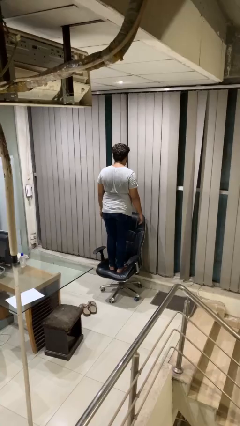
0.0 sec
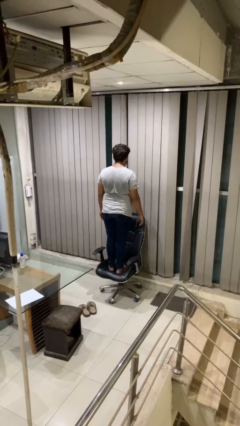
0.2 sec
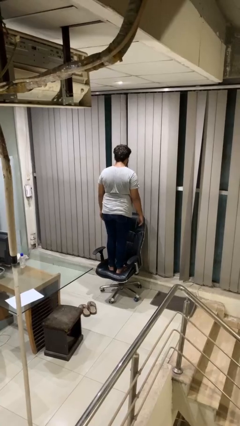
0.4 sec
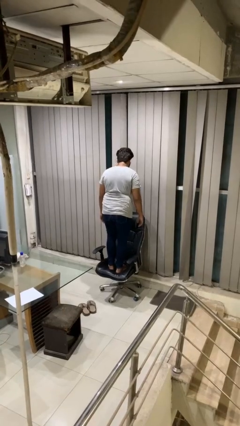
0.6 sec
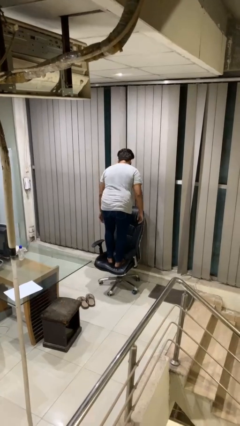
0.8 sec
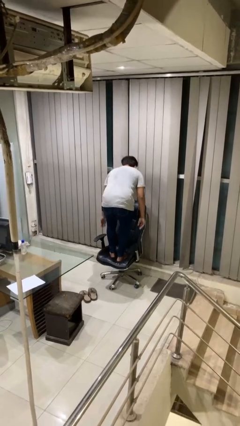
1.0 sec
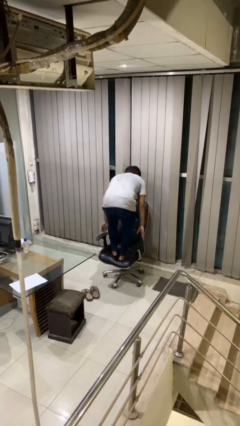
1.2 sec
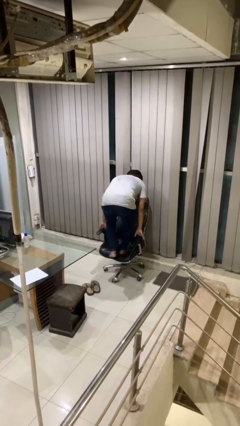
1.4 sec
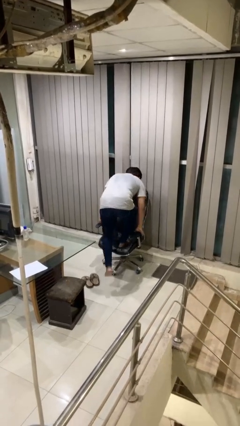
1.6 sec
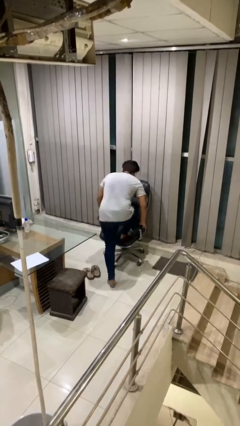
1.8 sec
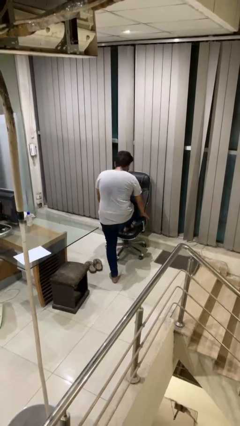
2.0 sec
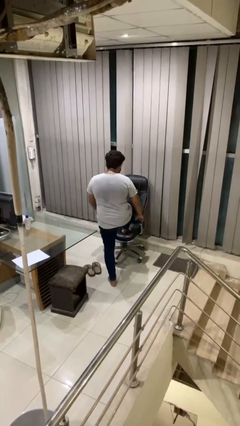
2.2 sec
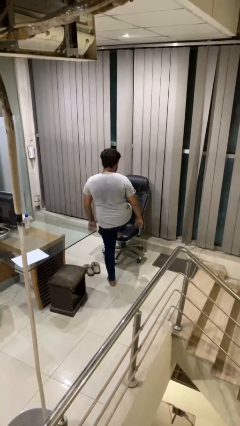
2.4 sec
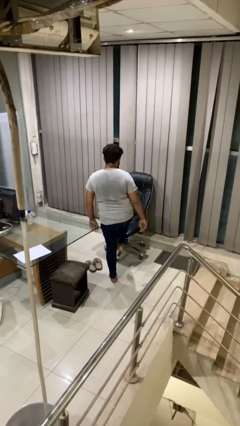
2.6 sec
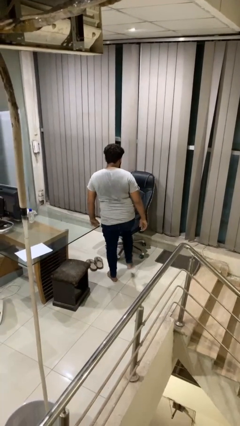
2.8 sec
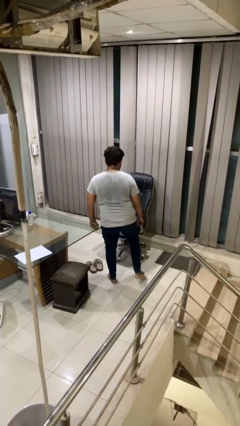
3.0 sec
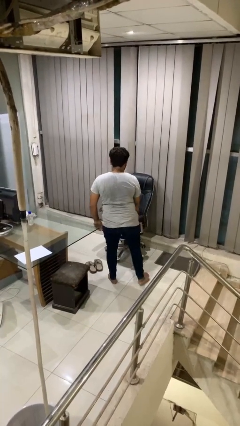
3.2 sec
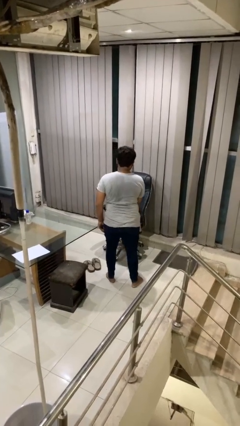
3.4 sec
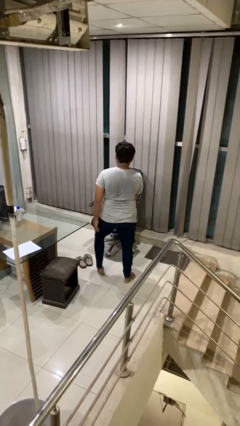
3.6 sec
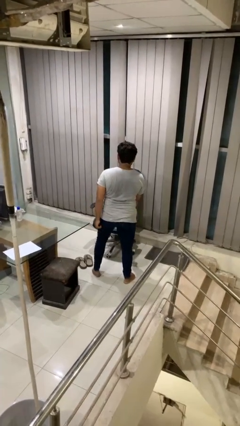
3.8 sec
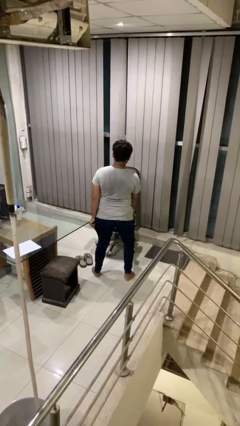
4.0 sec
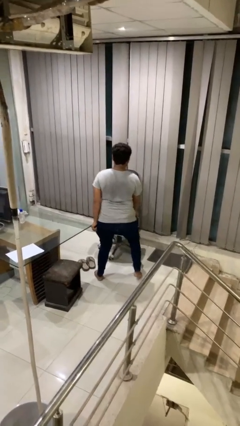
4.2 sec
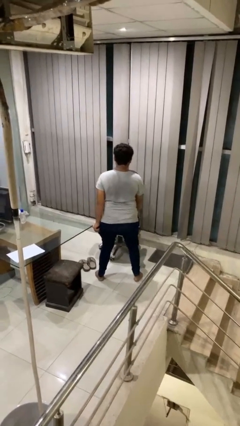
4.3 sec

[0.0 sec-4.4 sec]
person climbs off chair

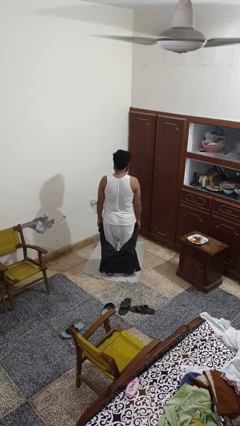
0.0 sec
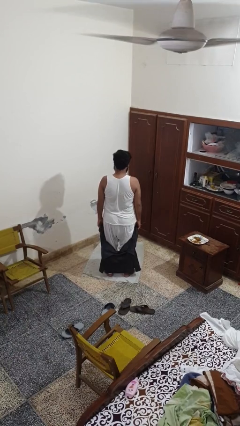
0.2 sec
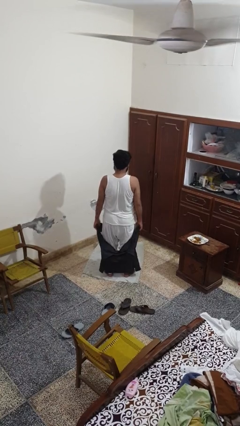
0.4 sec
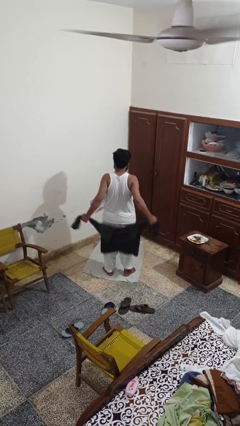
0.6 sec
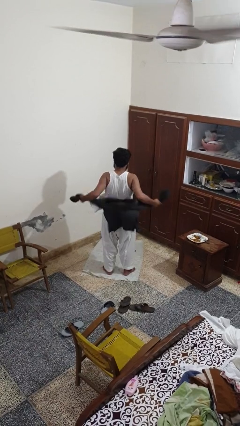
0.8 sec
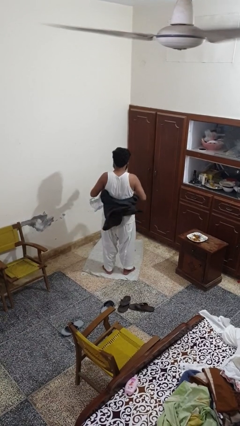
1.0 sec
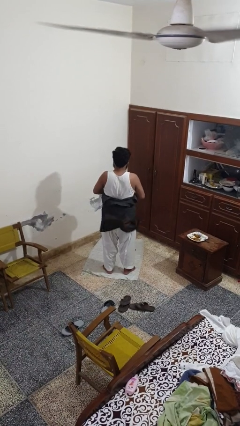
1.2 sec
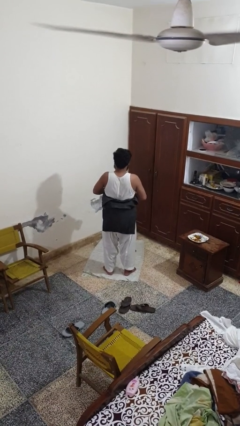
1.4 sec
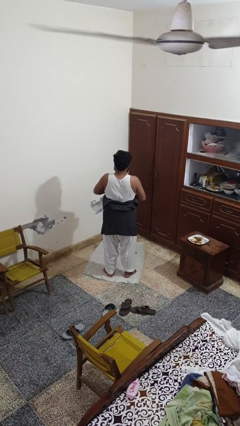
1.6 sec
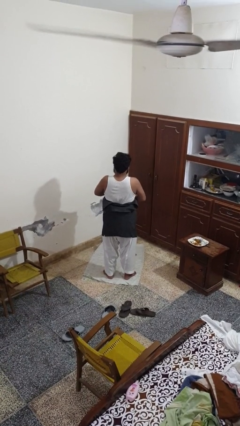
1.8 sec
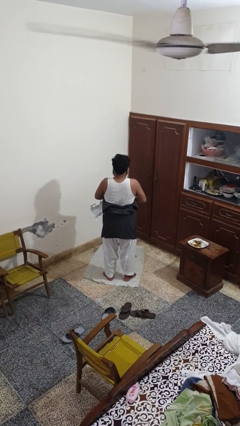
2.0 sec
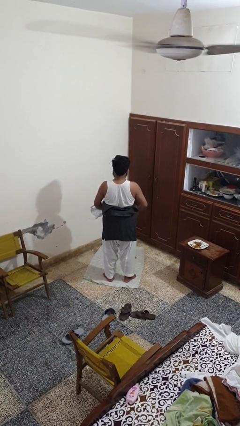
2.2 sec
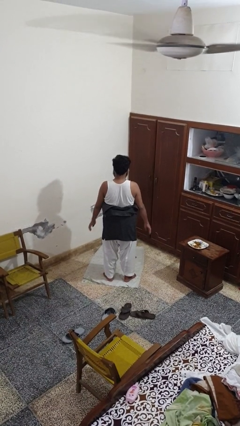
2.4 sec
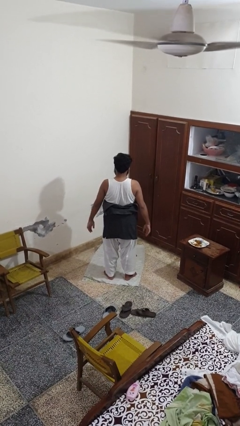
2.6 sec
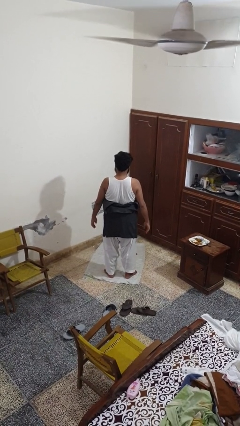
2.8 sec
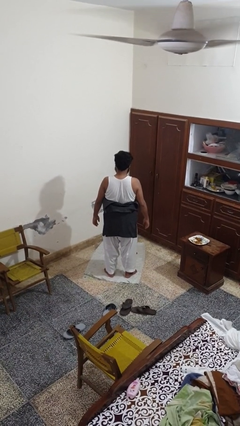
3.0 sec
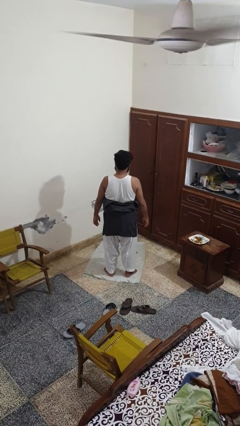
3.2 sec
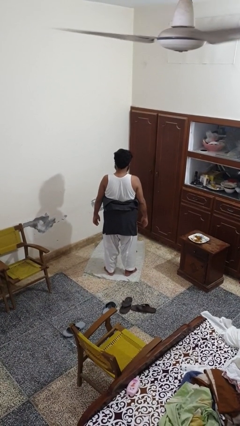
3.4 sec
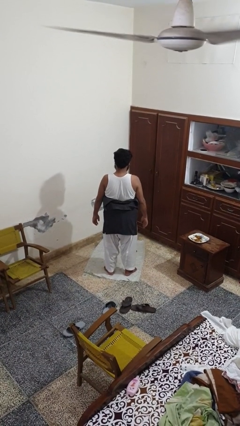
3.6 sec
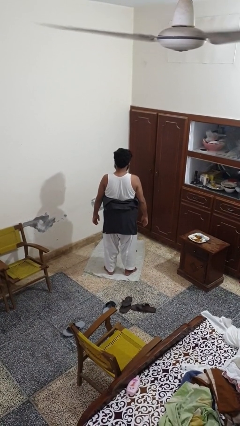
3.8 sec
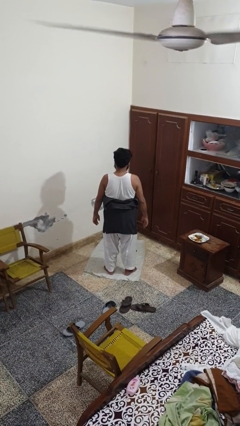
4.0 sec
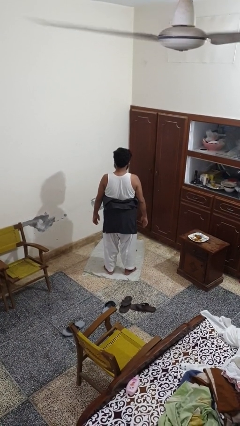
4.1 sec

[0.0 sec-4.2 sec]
person ties jacket around waist

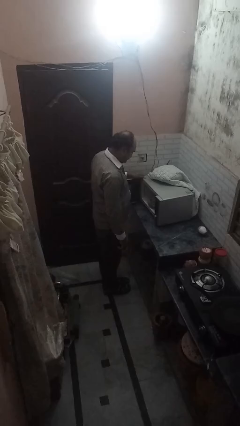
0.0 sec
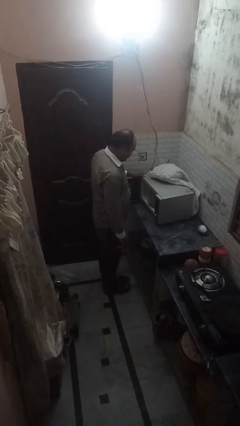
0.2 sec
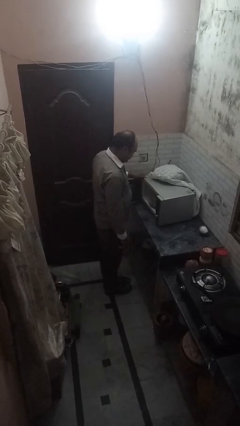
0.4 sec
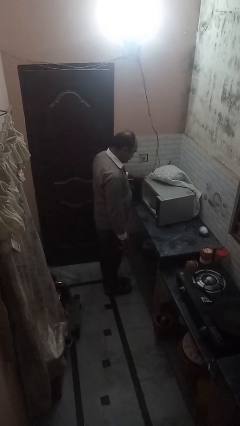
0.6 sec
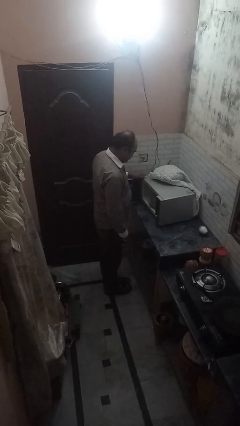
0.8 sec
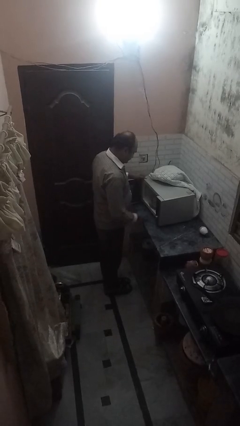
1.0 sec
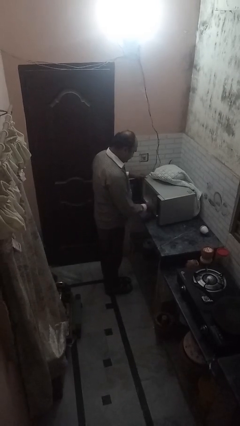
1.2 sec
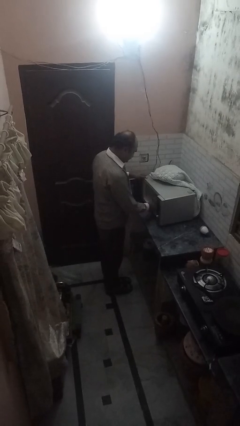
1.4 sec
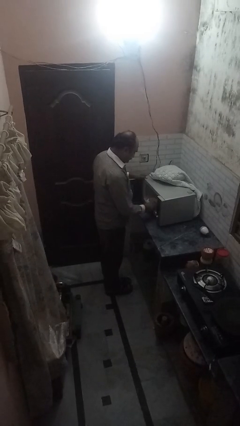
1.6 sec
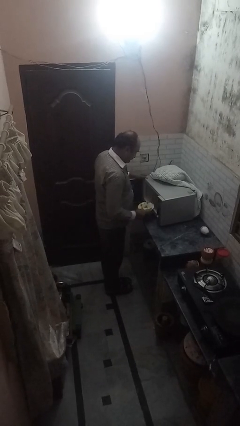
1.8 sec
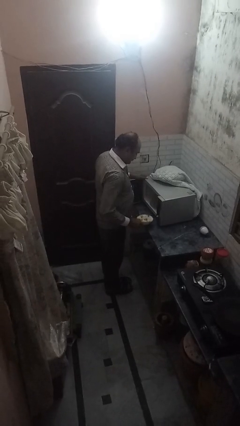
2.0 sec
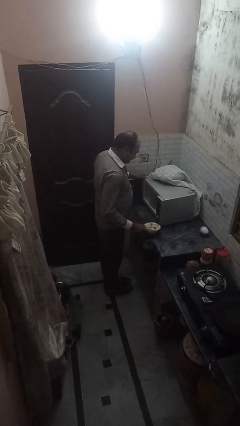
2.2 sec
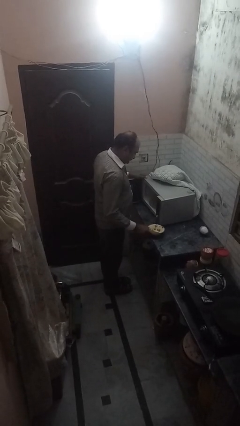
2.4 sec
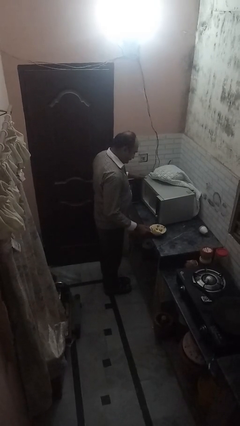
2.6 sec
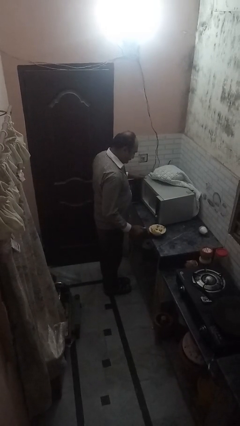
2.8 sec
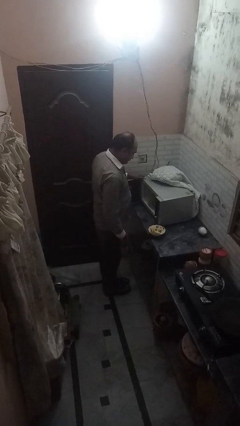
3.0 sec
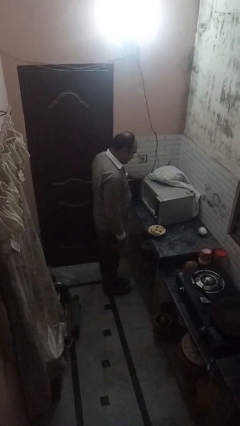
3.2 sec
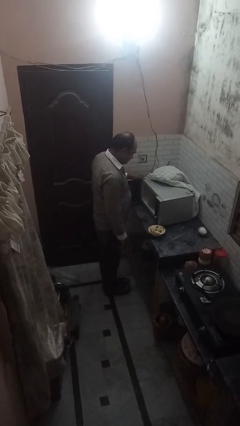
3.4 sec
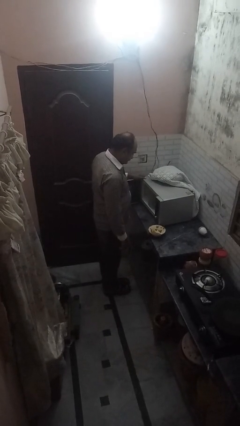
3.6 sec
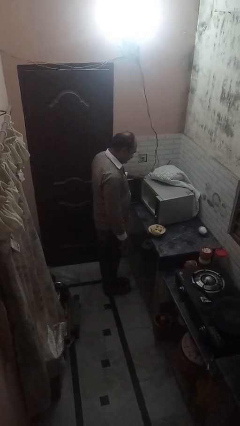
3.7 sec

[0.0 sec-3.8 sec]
person takes object from microwave

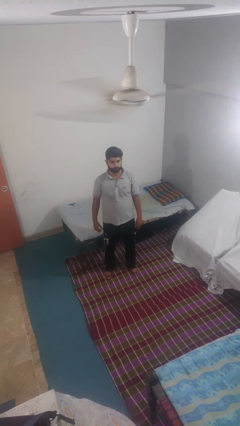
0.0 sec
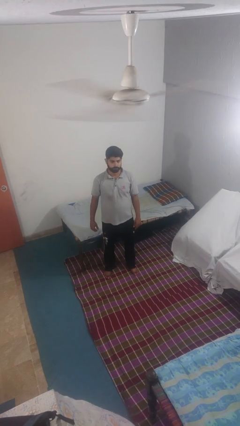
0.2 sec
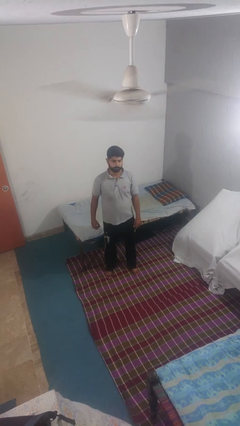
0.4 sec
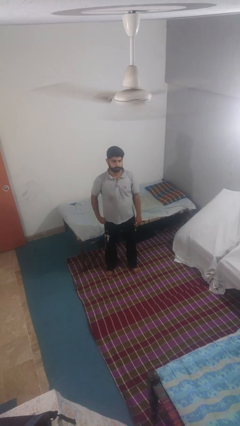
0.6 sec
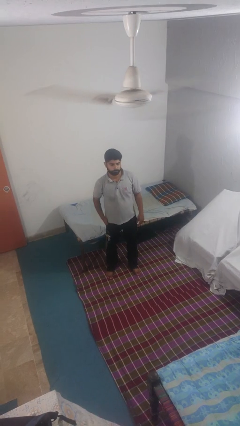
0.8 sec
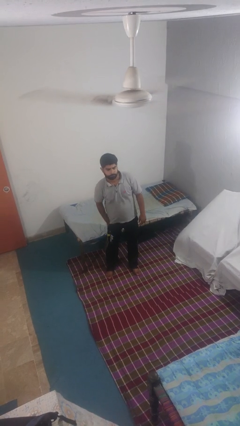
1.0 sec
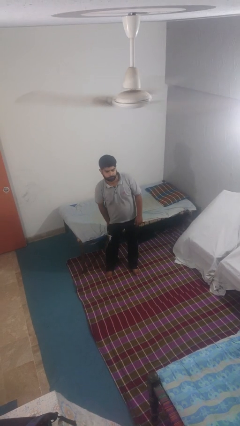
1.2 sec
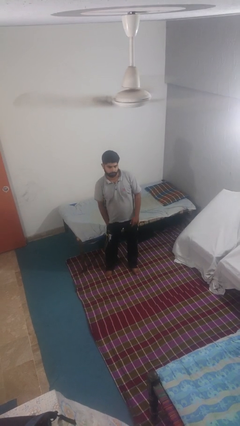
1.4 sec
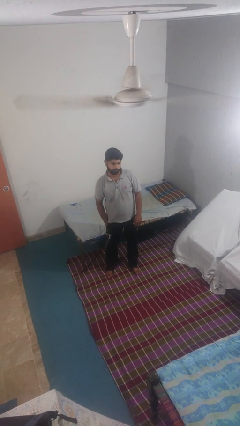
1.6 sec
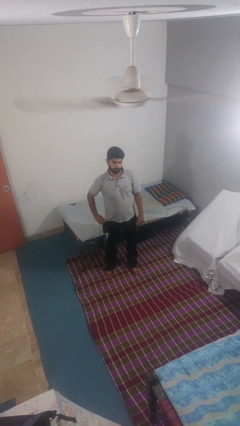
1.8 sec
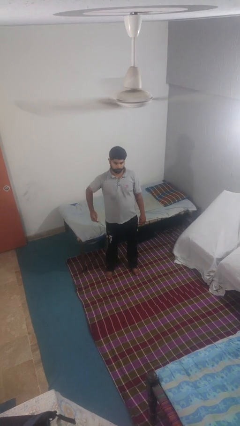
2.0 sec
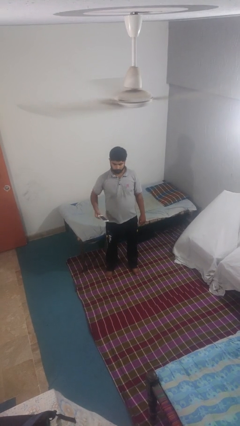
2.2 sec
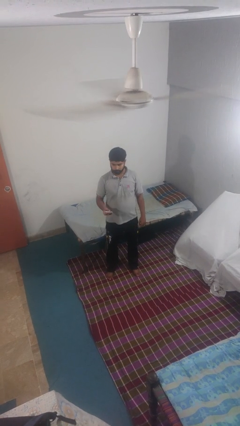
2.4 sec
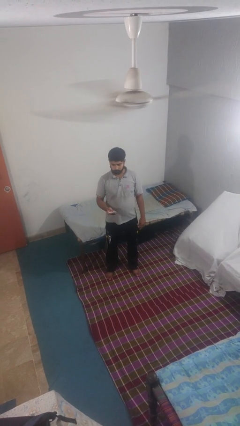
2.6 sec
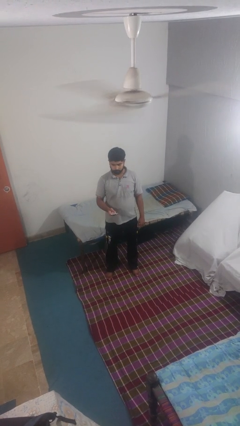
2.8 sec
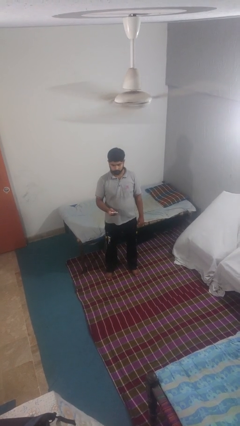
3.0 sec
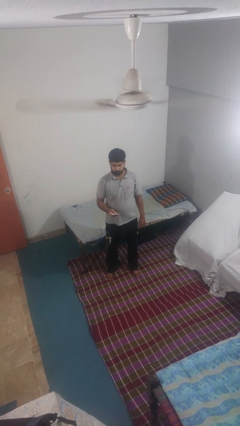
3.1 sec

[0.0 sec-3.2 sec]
person takes phone from pocket

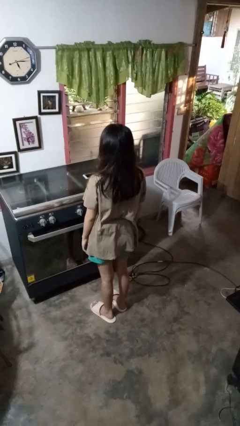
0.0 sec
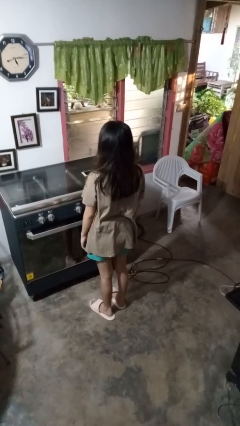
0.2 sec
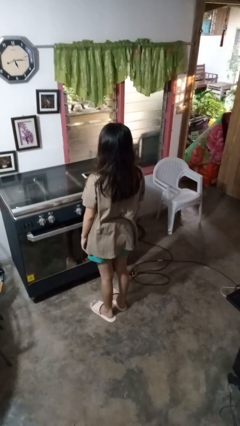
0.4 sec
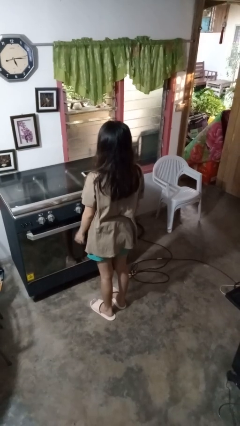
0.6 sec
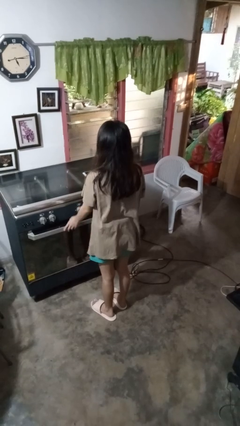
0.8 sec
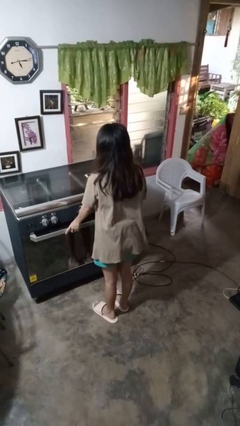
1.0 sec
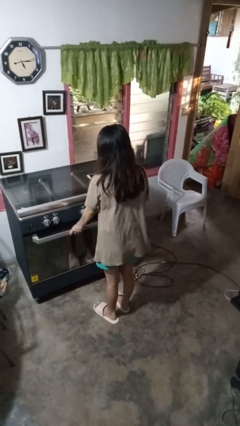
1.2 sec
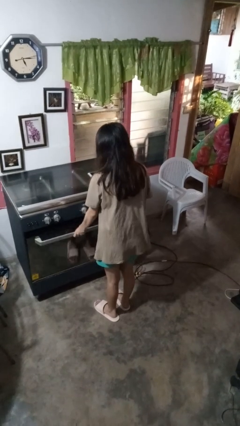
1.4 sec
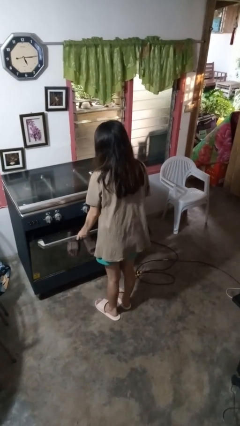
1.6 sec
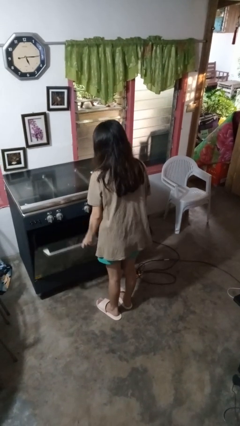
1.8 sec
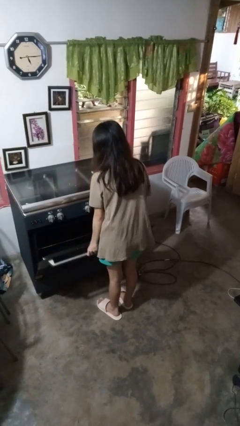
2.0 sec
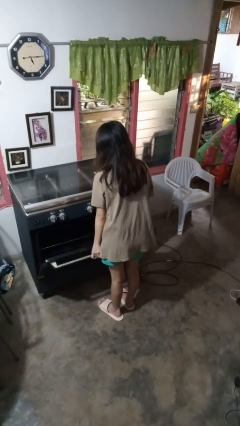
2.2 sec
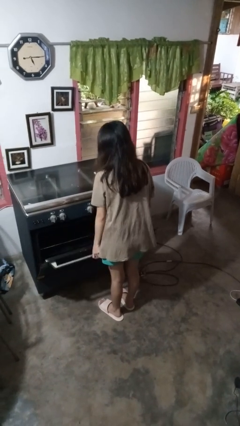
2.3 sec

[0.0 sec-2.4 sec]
person opens oven door
